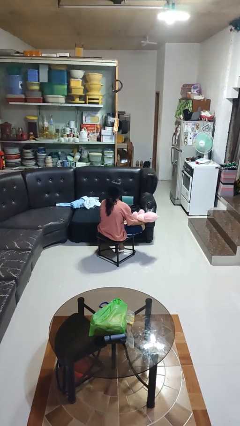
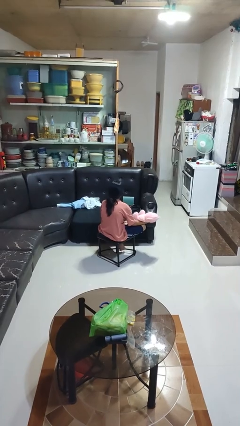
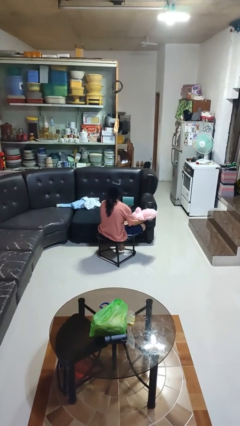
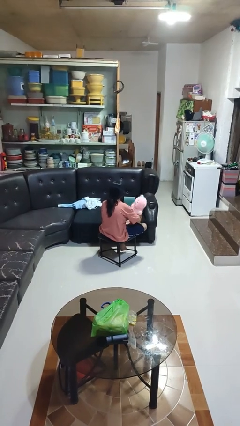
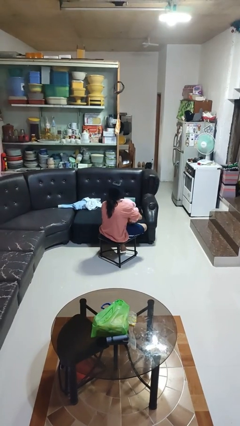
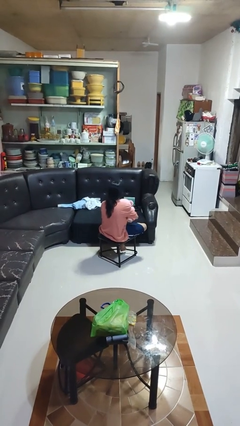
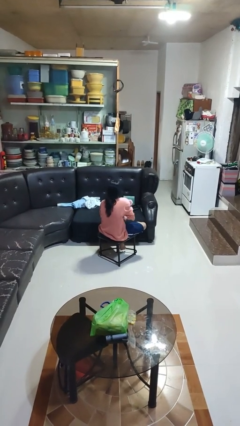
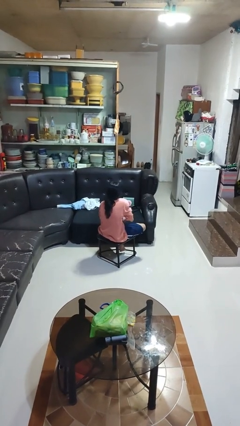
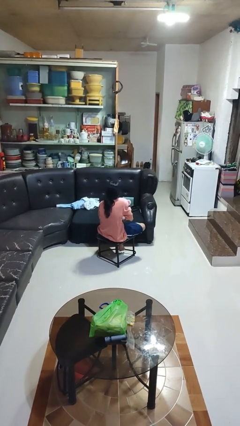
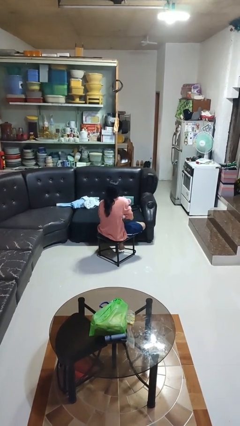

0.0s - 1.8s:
person hugs stuffed animal

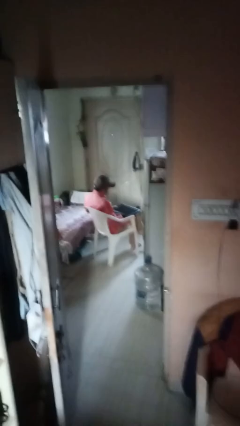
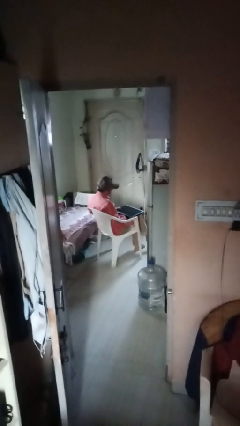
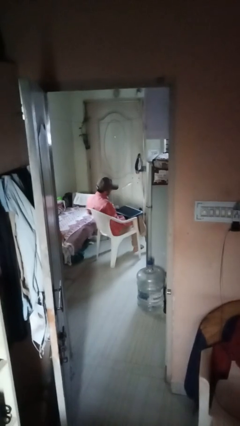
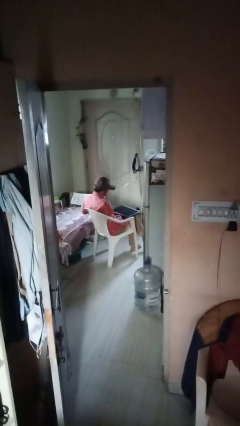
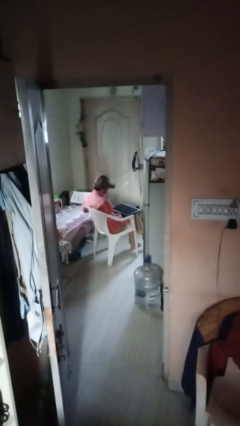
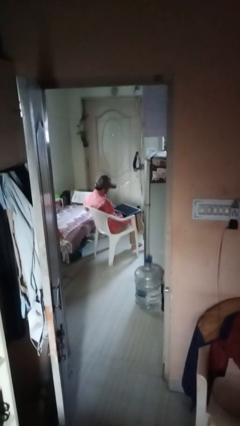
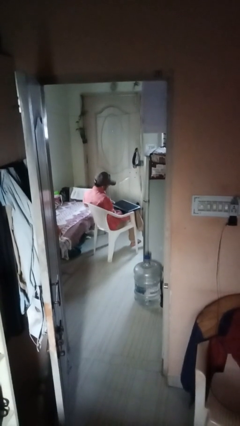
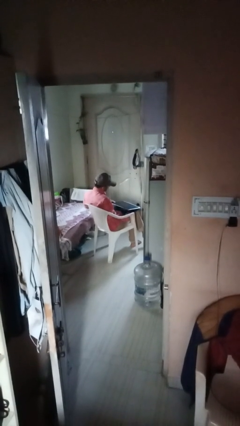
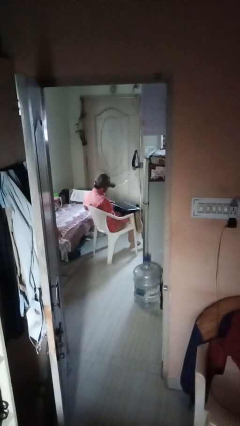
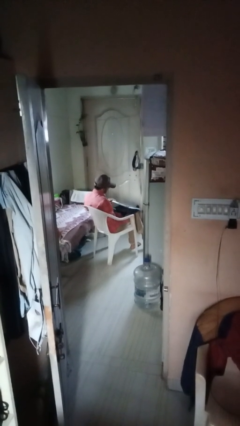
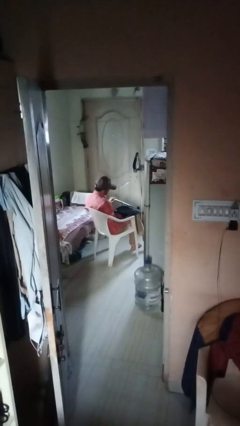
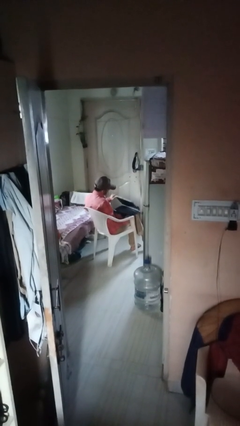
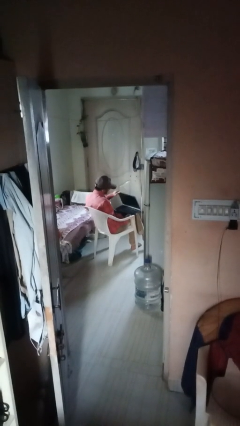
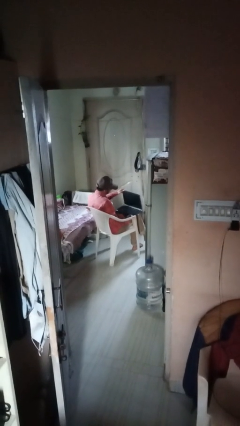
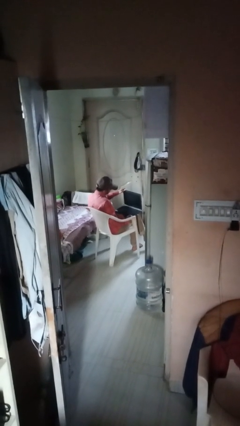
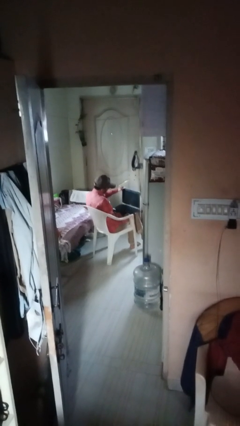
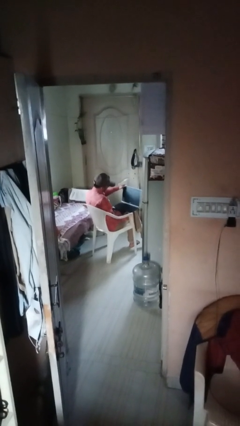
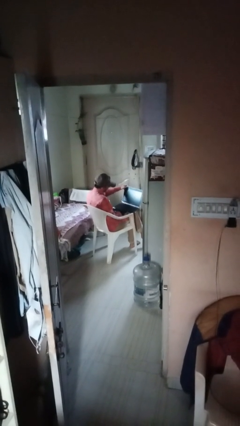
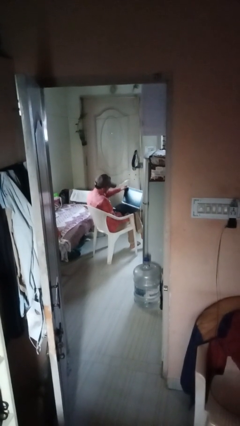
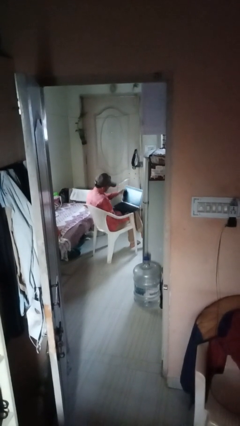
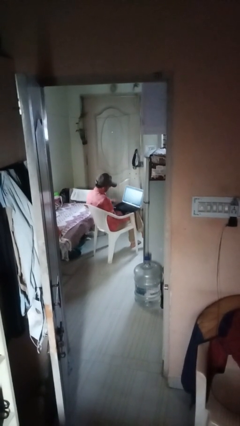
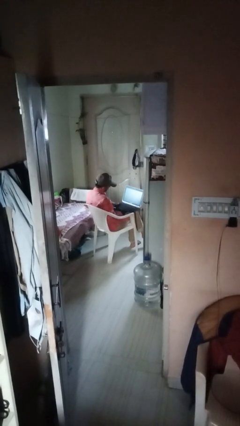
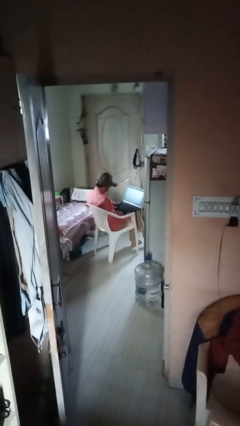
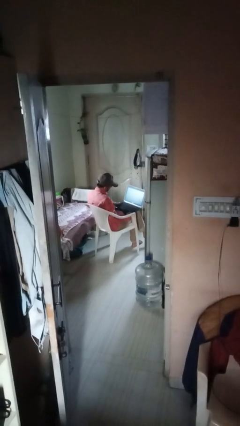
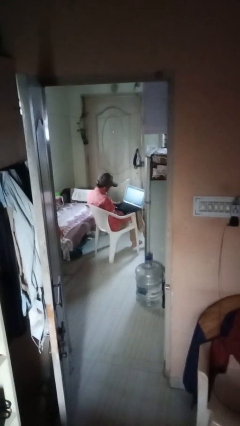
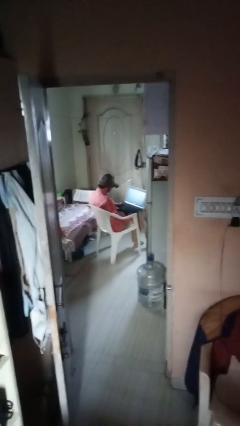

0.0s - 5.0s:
person opens laptop

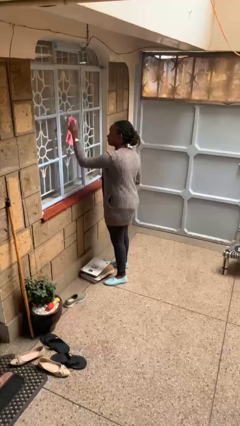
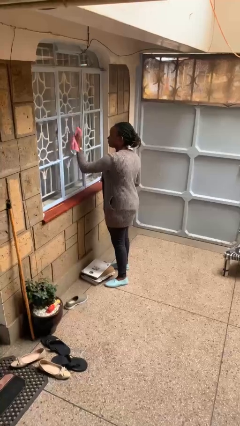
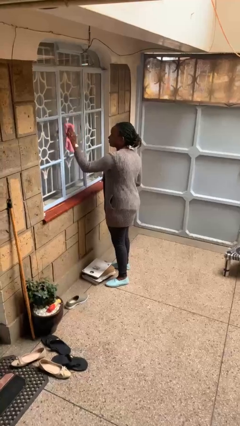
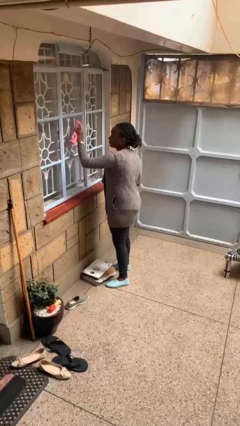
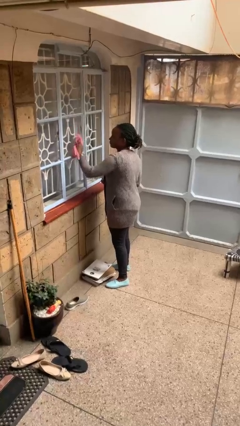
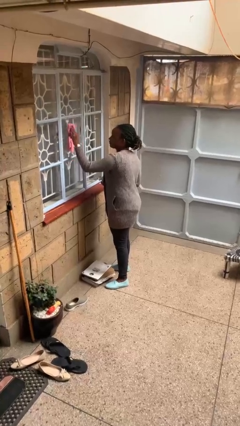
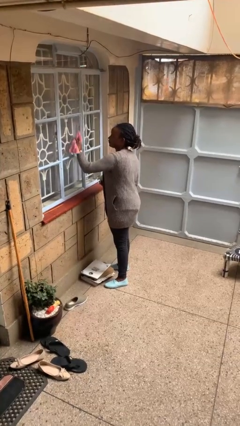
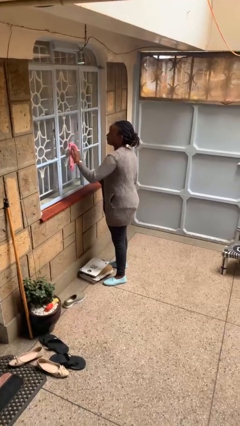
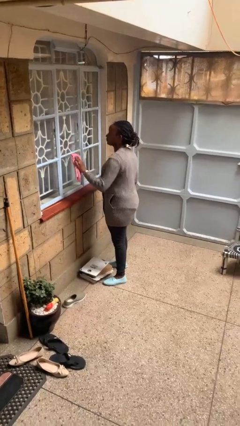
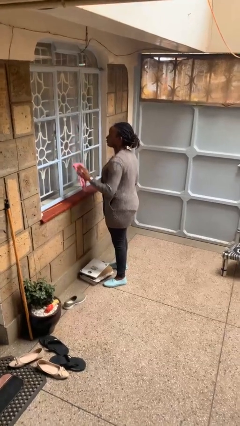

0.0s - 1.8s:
person washes window

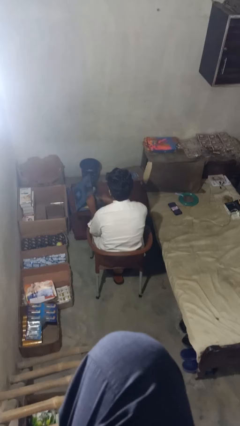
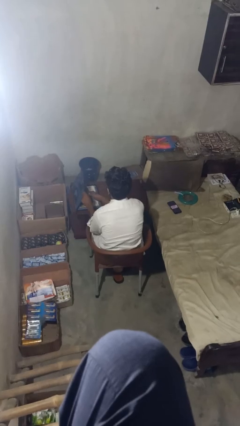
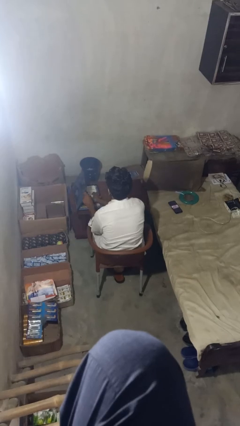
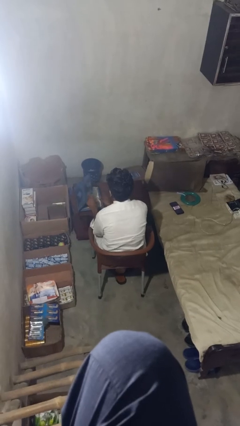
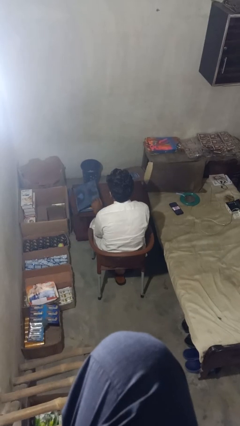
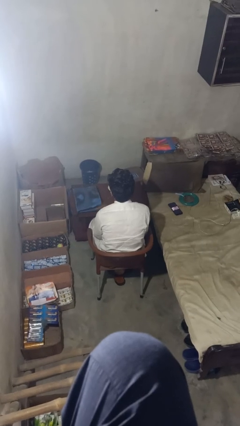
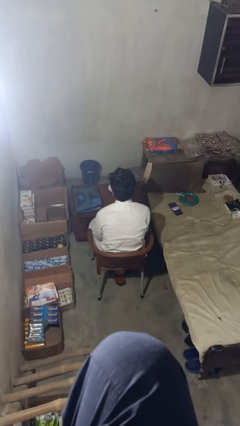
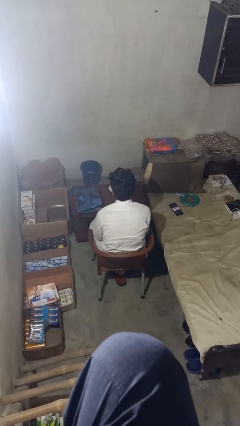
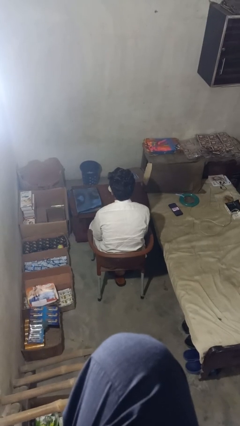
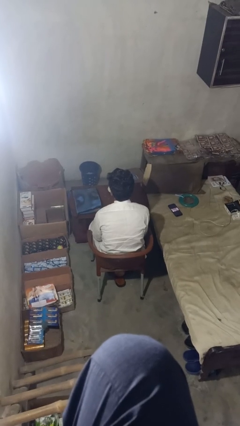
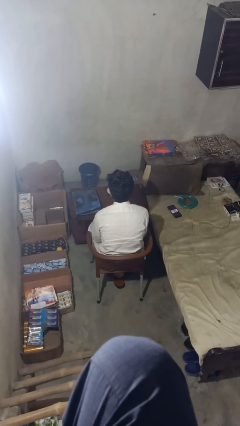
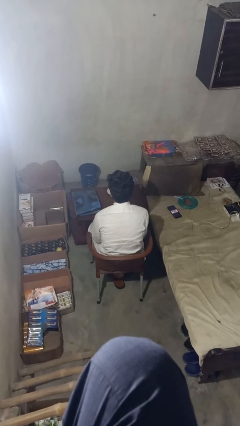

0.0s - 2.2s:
person takes object from bag

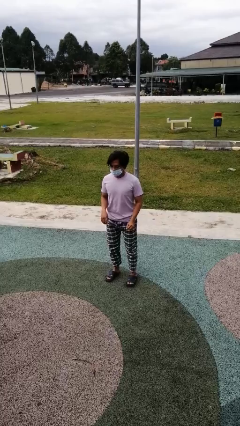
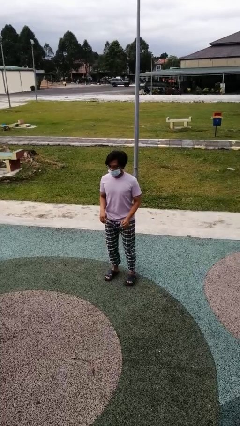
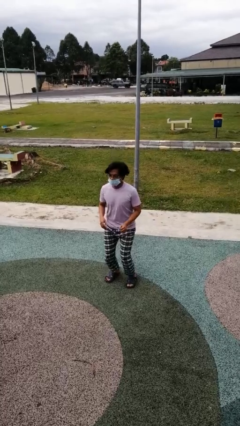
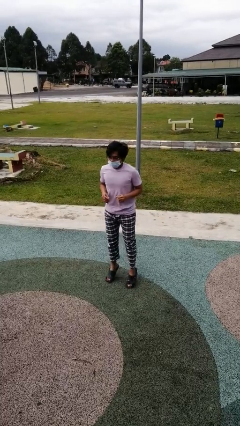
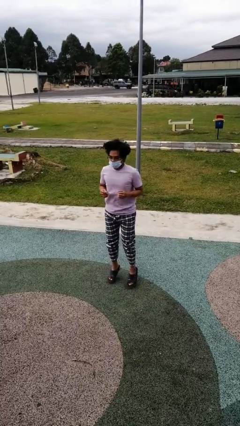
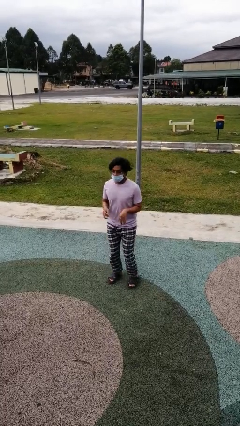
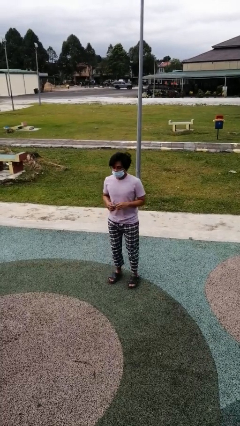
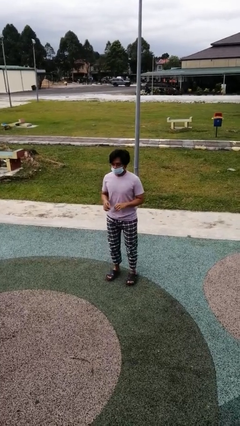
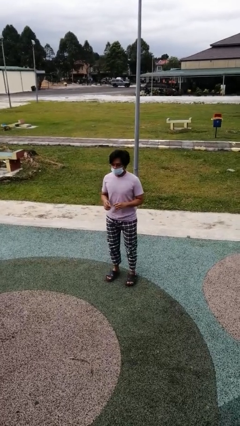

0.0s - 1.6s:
person jumps

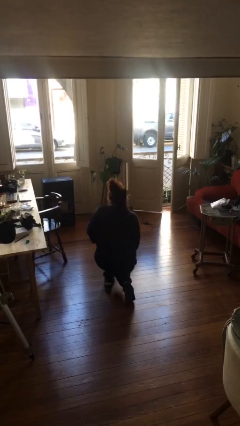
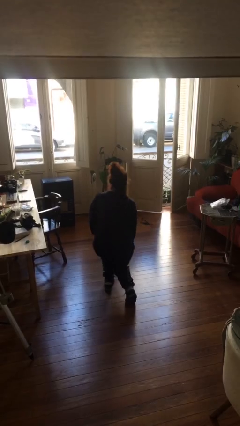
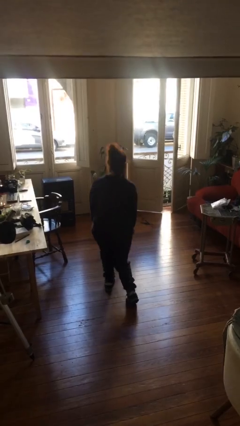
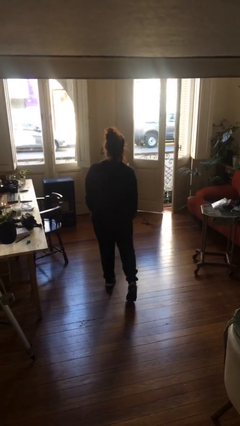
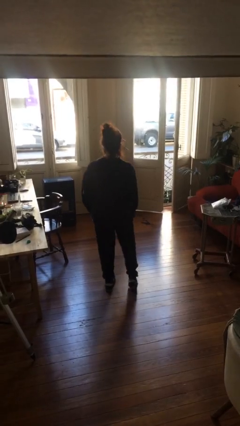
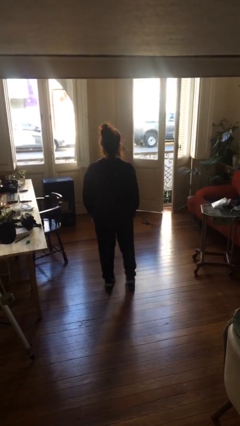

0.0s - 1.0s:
person stands up from floor

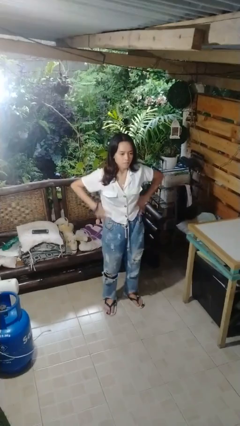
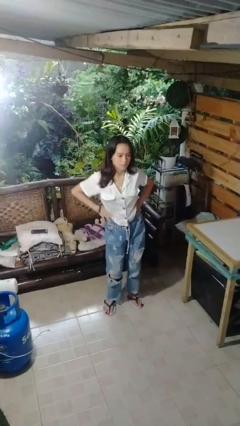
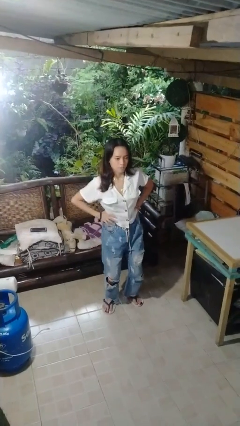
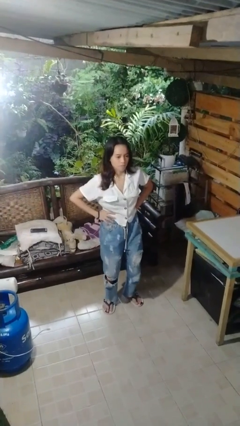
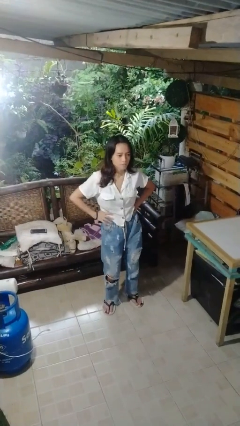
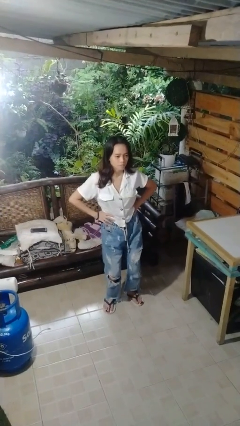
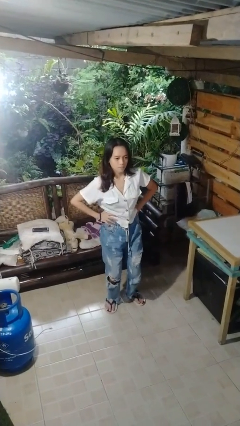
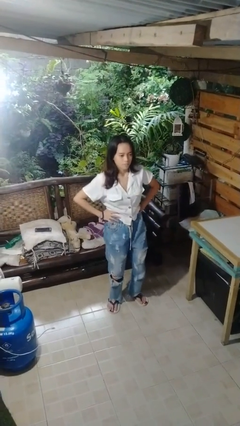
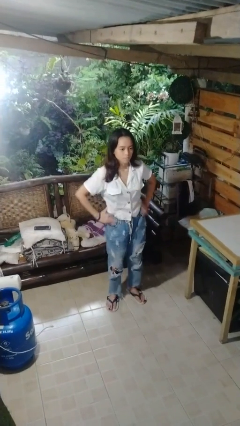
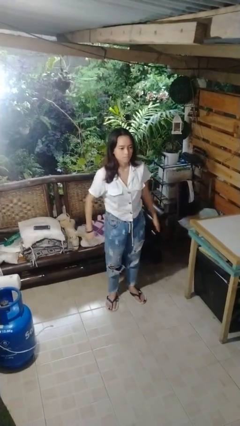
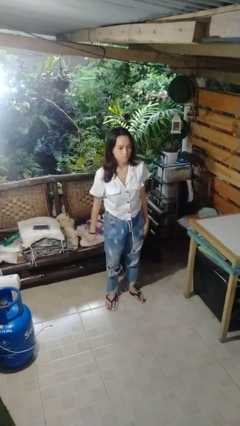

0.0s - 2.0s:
person wiggles hips

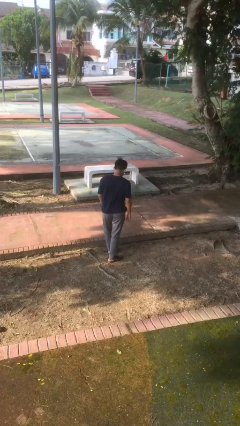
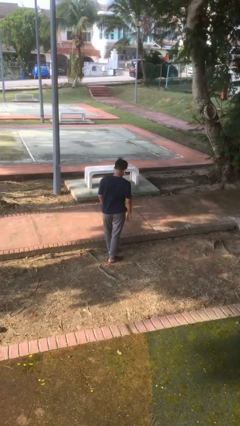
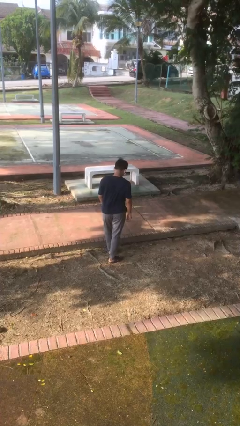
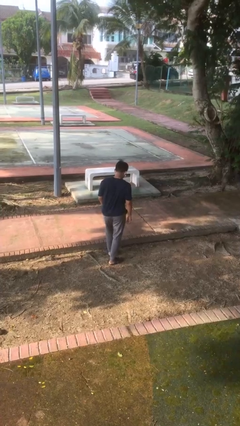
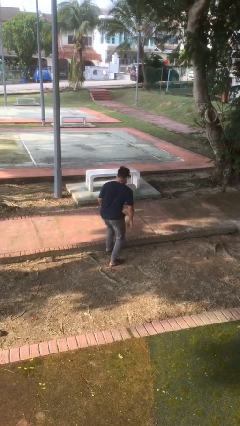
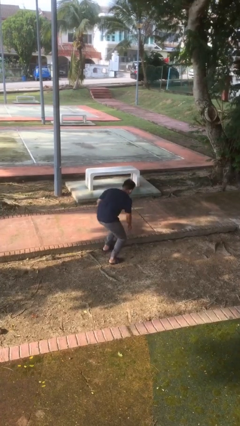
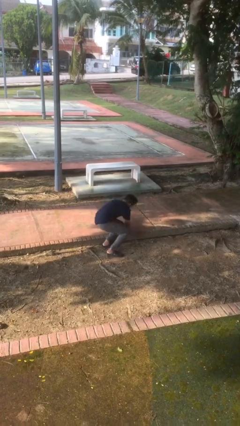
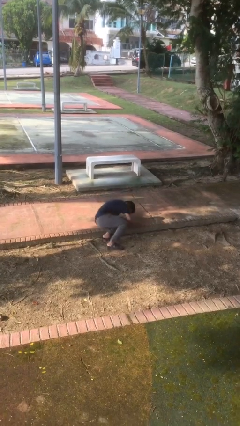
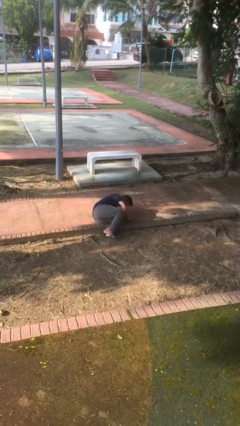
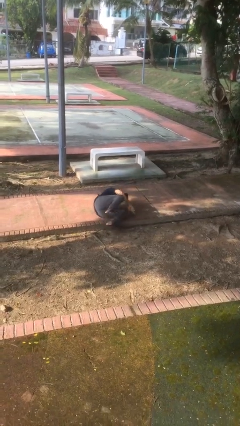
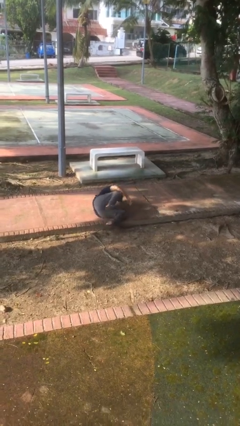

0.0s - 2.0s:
person trips on object on floor
